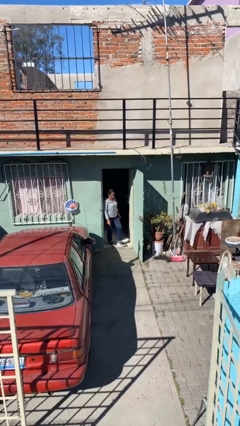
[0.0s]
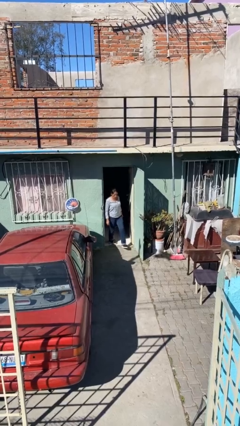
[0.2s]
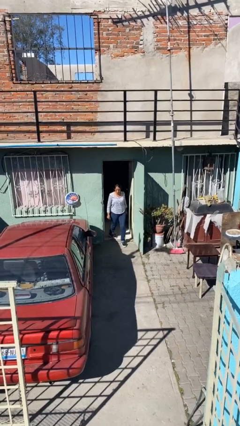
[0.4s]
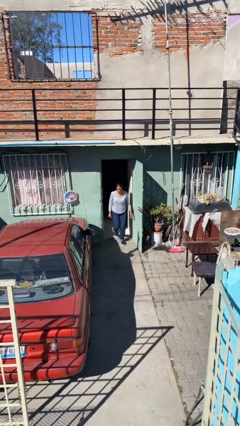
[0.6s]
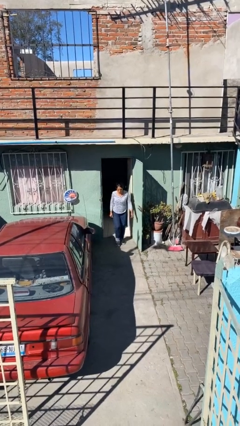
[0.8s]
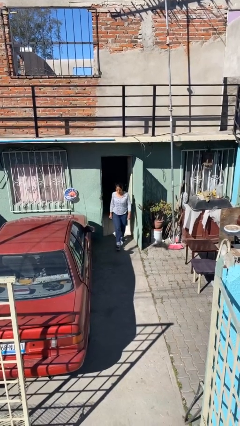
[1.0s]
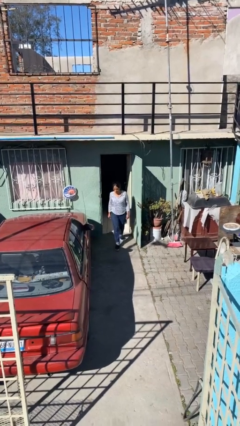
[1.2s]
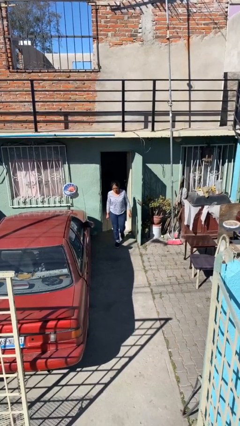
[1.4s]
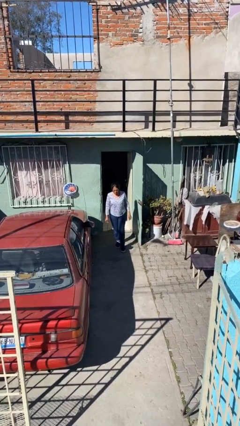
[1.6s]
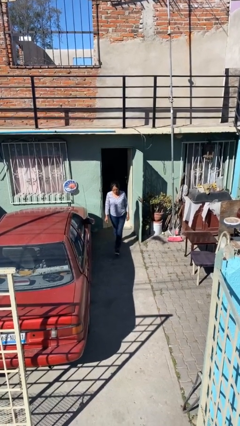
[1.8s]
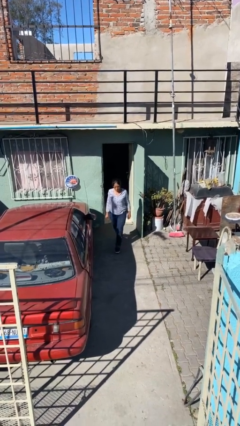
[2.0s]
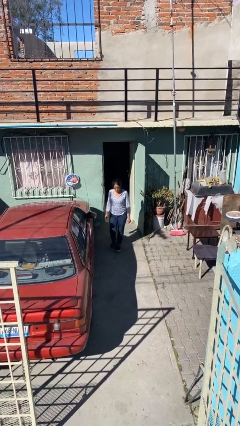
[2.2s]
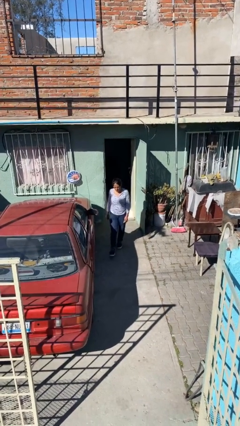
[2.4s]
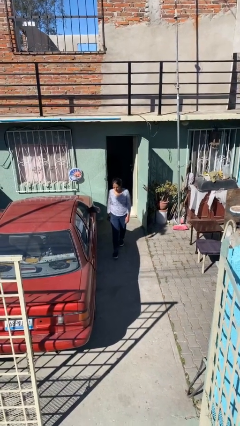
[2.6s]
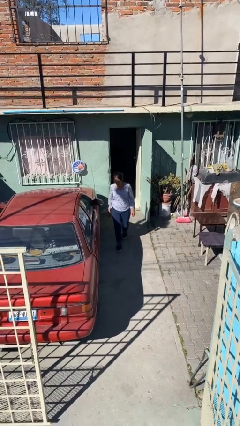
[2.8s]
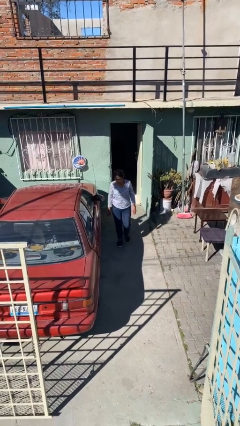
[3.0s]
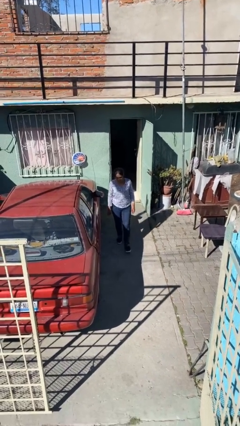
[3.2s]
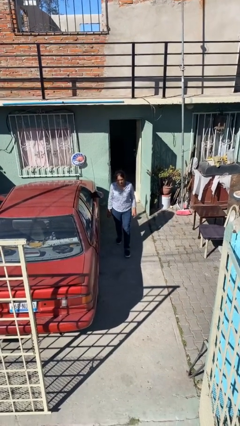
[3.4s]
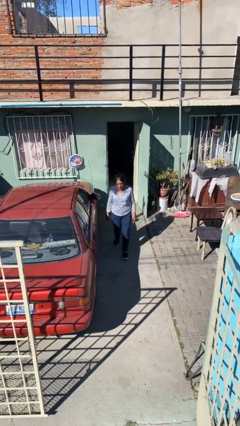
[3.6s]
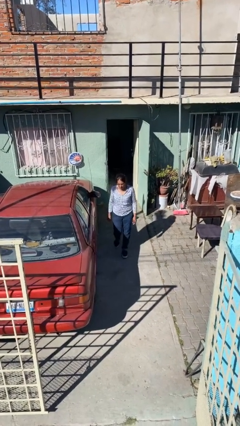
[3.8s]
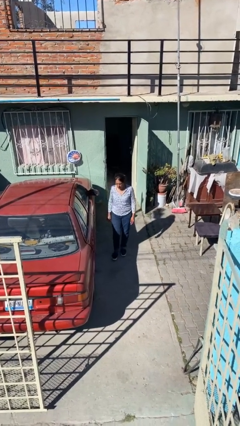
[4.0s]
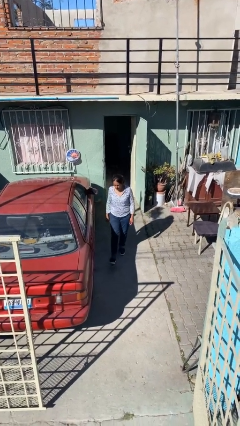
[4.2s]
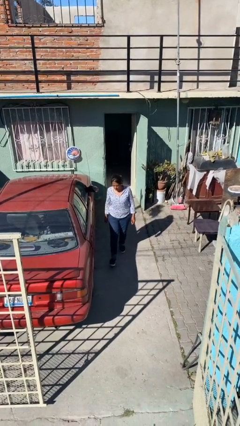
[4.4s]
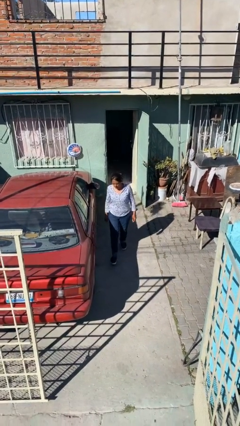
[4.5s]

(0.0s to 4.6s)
person enters scene through structure

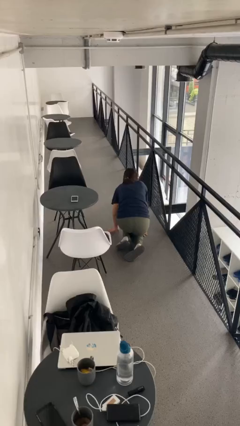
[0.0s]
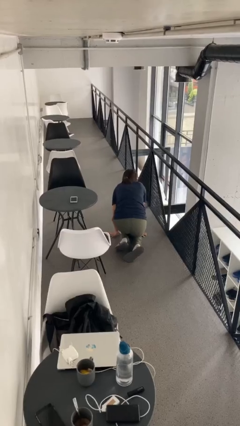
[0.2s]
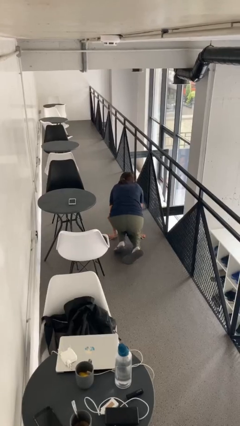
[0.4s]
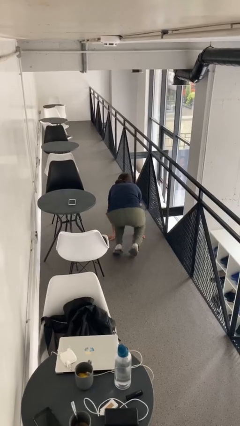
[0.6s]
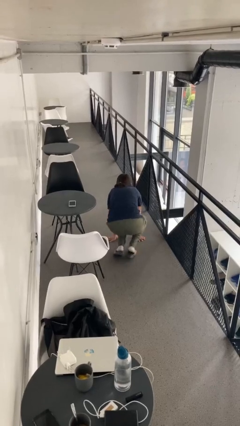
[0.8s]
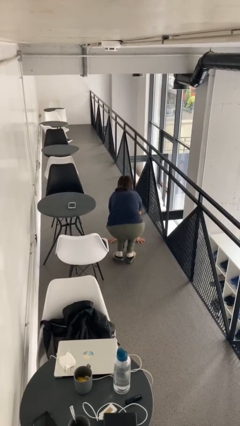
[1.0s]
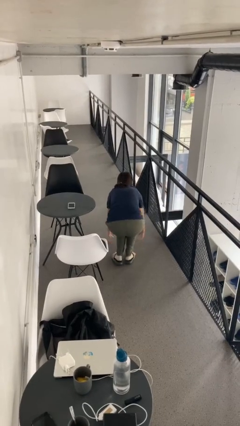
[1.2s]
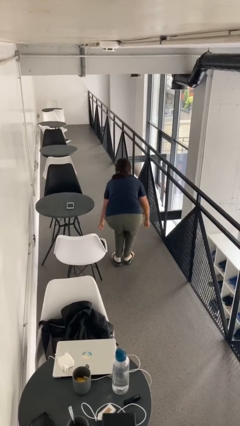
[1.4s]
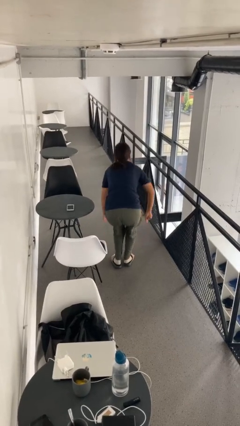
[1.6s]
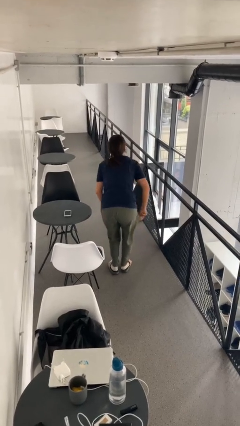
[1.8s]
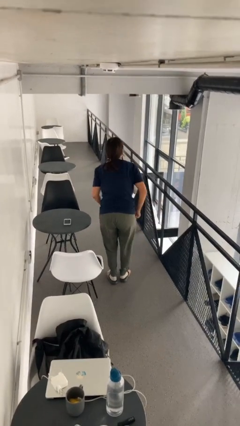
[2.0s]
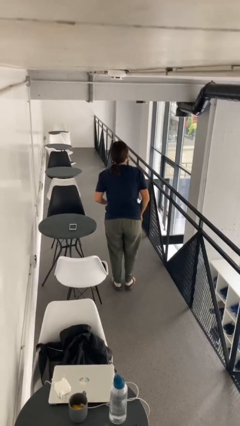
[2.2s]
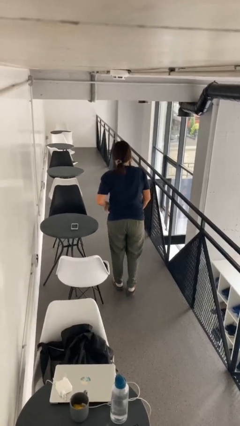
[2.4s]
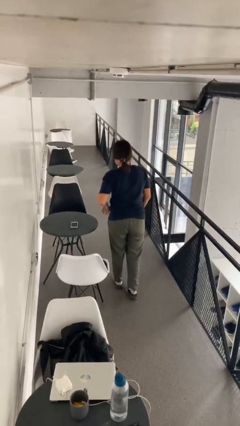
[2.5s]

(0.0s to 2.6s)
person stands up from floor

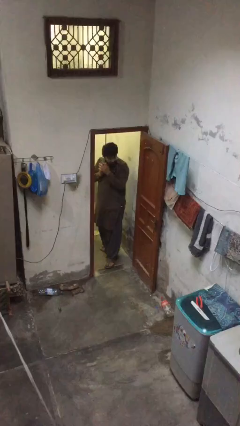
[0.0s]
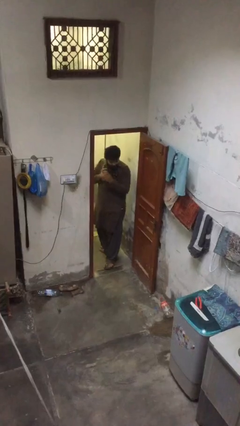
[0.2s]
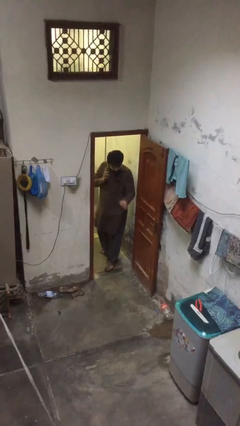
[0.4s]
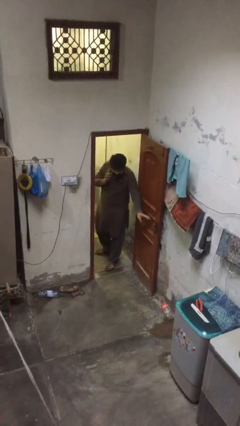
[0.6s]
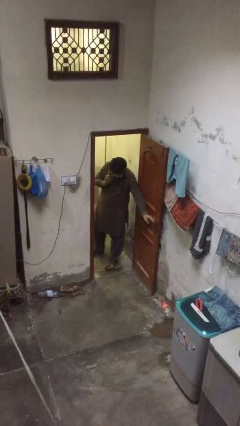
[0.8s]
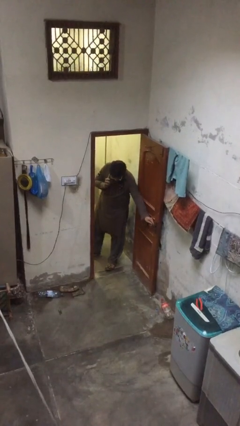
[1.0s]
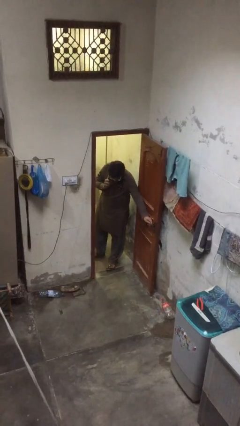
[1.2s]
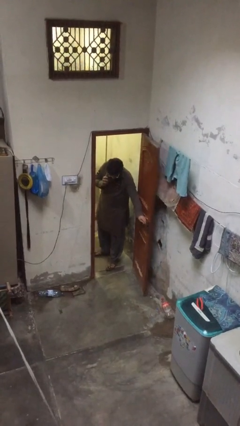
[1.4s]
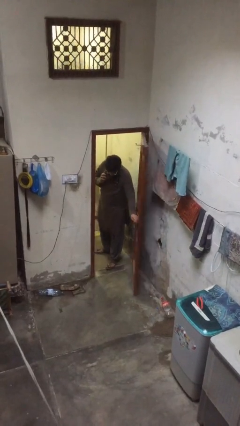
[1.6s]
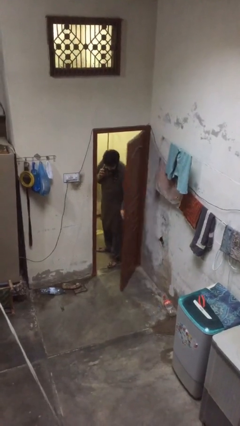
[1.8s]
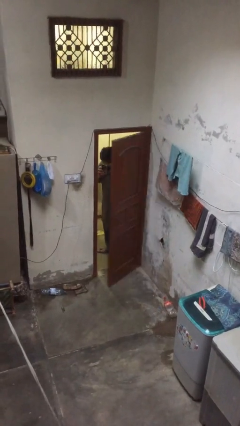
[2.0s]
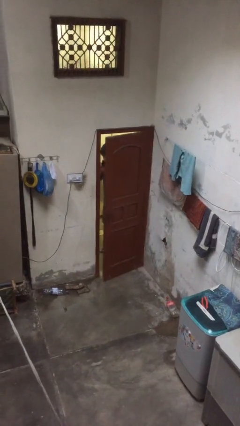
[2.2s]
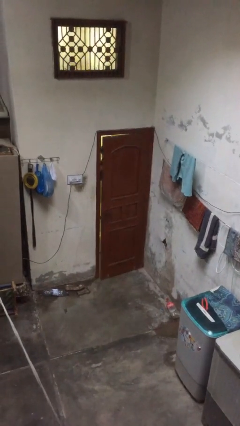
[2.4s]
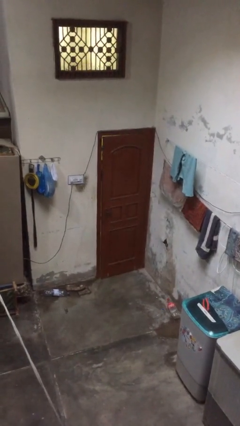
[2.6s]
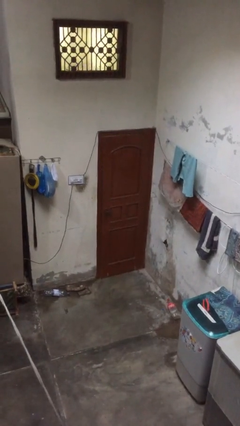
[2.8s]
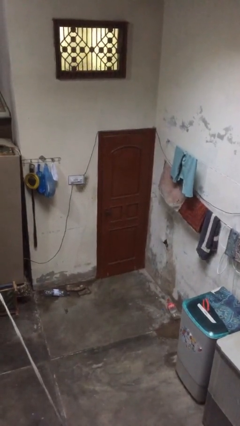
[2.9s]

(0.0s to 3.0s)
person closes facility door

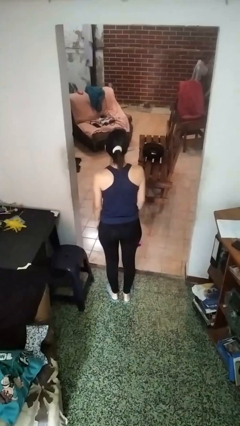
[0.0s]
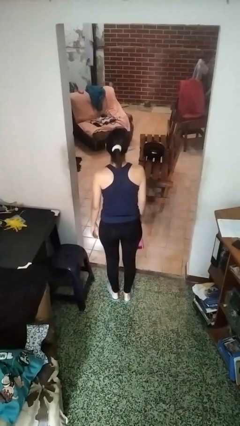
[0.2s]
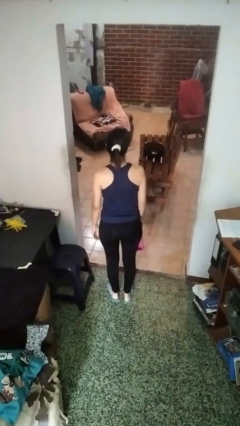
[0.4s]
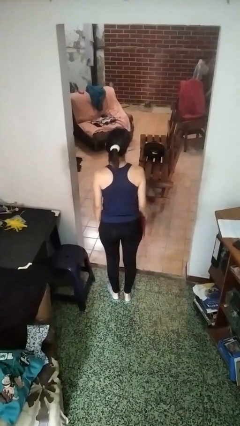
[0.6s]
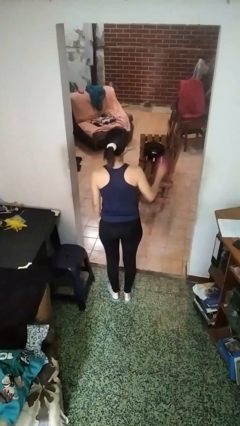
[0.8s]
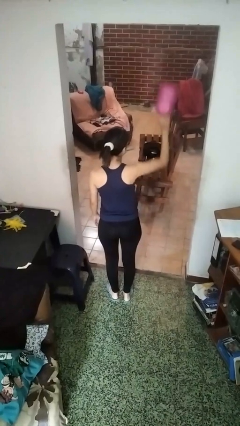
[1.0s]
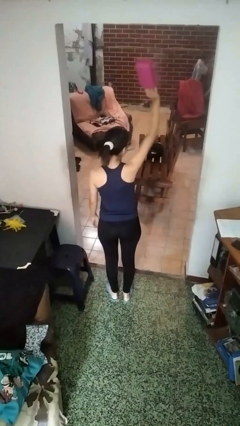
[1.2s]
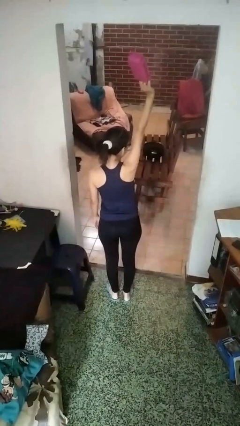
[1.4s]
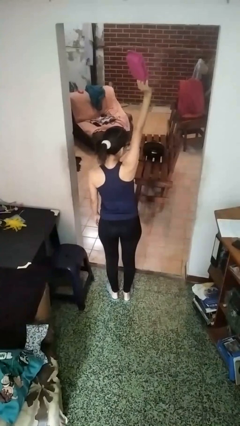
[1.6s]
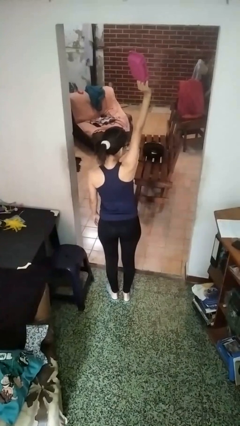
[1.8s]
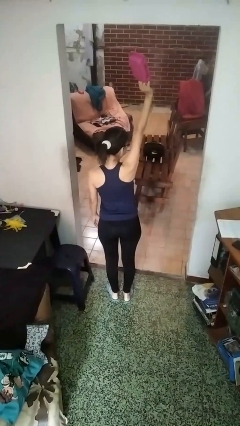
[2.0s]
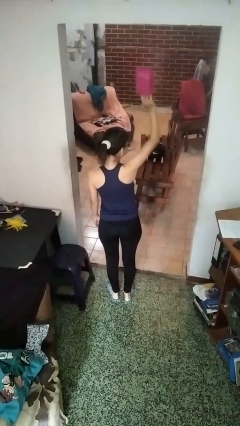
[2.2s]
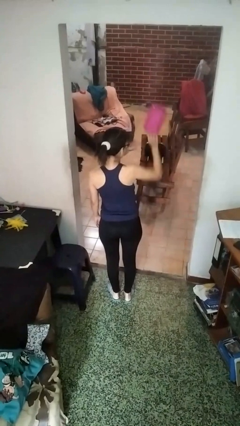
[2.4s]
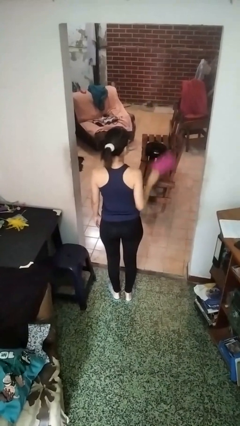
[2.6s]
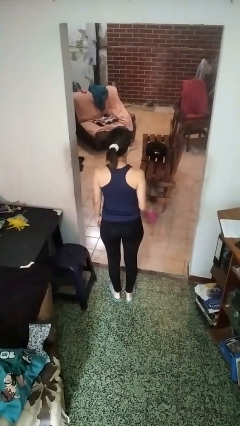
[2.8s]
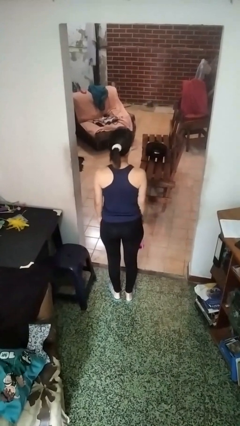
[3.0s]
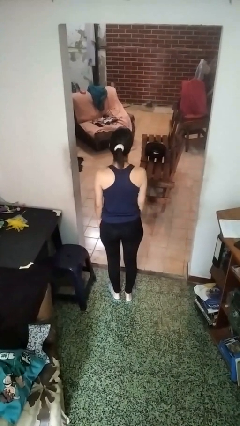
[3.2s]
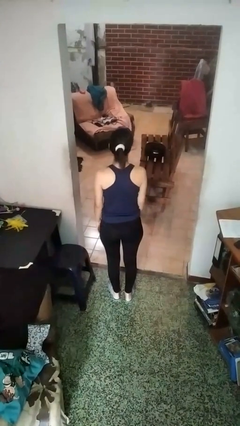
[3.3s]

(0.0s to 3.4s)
person holds object above head

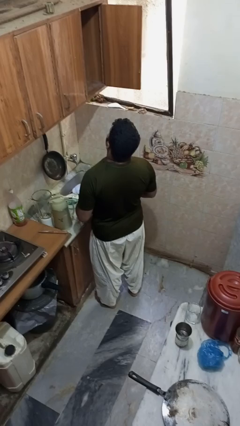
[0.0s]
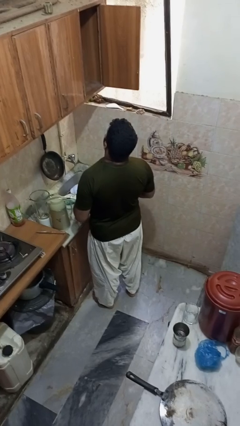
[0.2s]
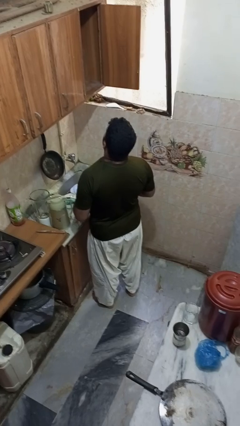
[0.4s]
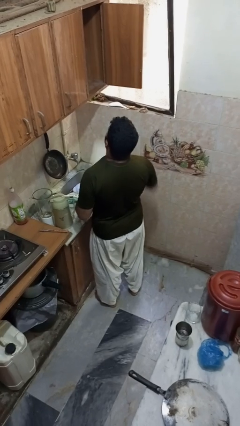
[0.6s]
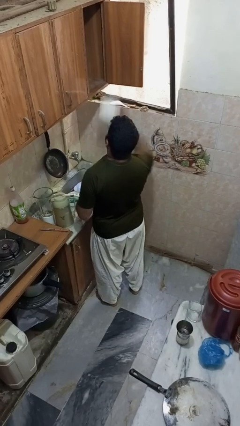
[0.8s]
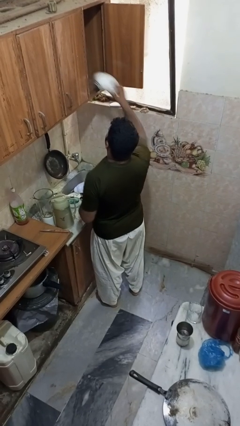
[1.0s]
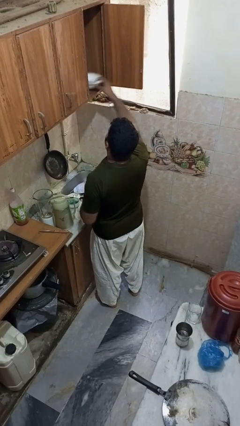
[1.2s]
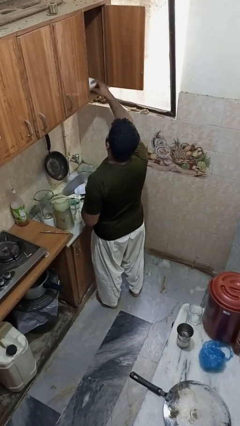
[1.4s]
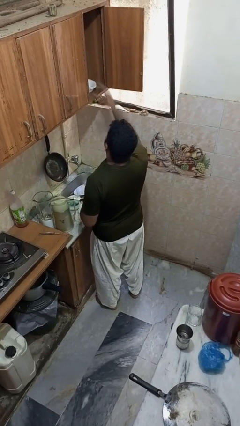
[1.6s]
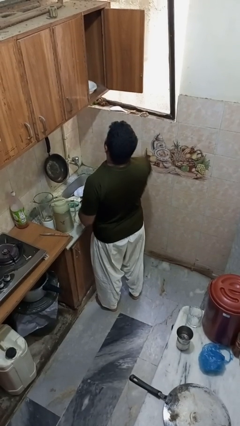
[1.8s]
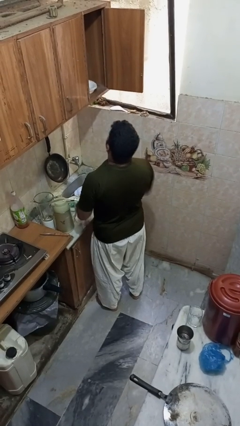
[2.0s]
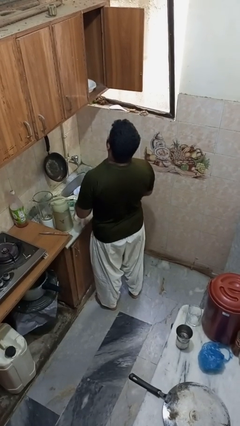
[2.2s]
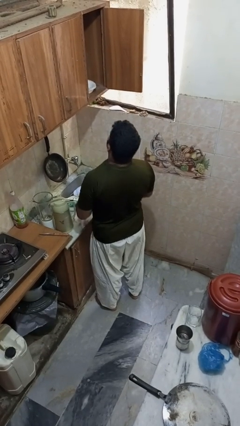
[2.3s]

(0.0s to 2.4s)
person puts object in cabinet

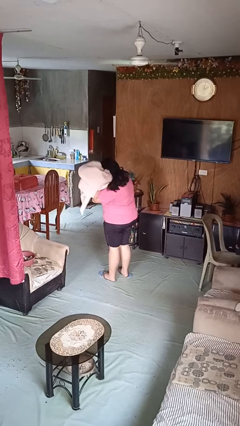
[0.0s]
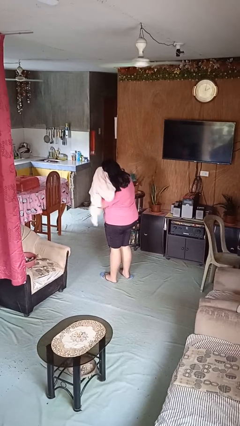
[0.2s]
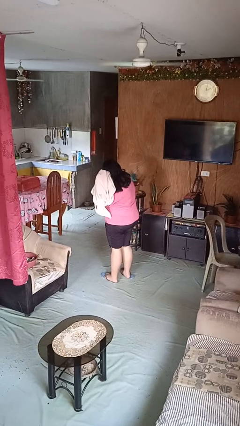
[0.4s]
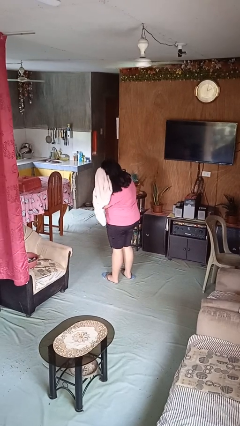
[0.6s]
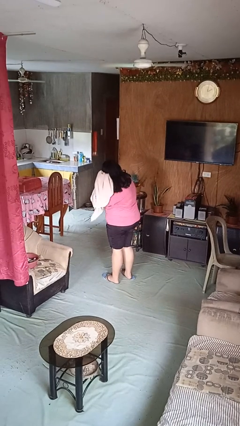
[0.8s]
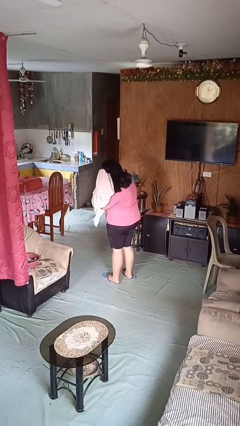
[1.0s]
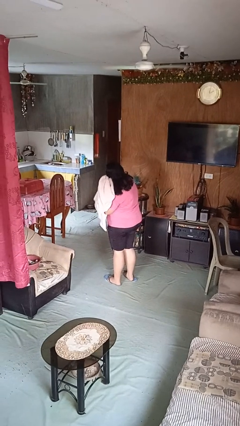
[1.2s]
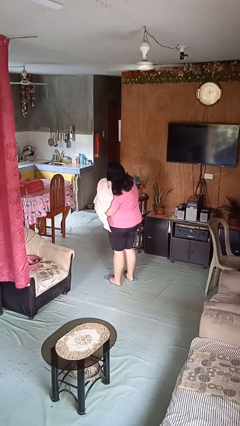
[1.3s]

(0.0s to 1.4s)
person dries hair with towel

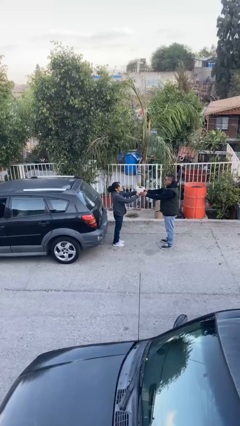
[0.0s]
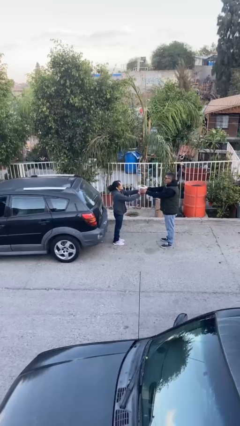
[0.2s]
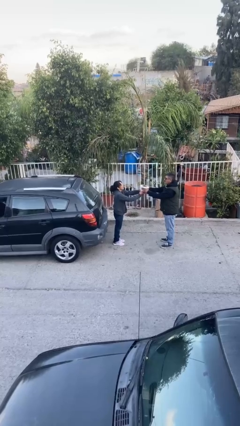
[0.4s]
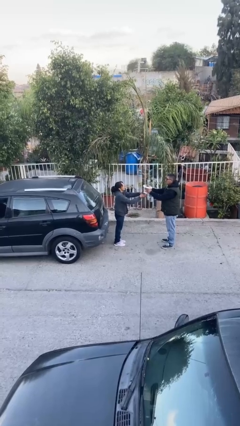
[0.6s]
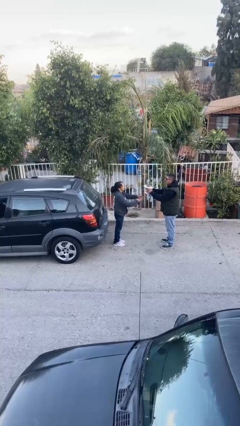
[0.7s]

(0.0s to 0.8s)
person transfers object to person
